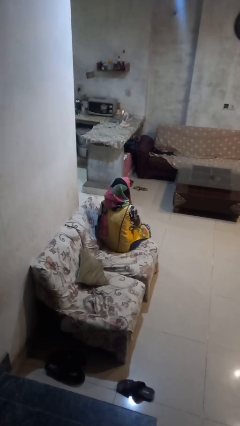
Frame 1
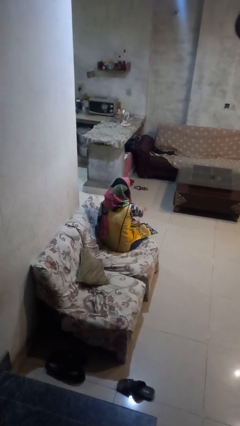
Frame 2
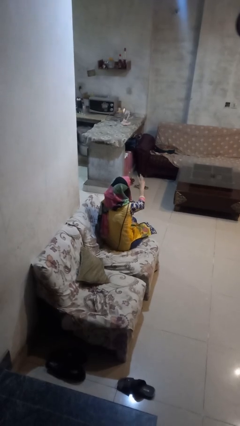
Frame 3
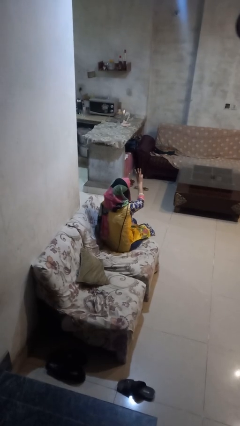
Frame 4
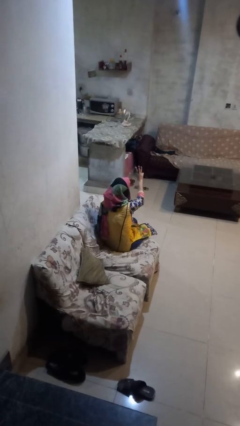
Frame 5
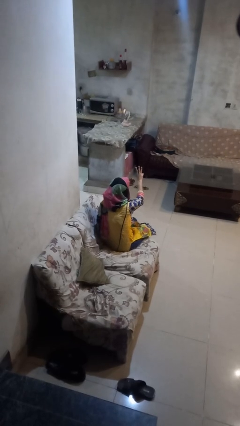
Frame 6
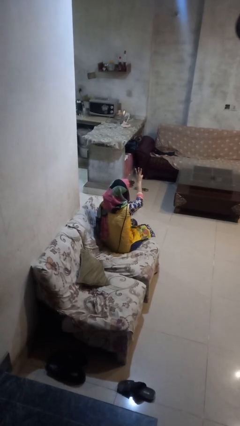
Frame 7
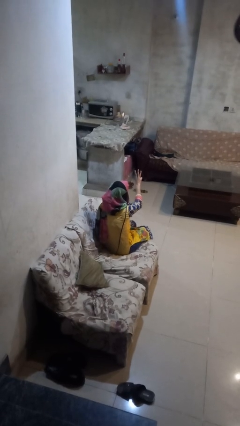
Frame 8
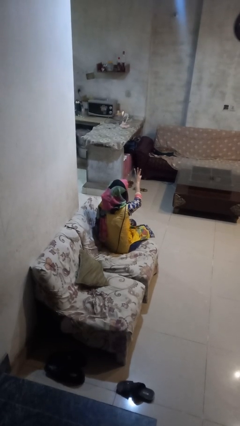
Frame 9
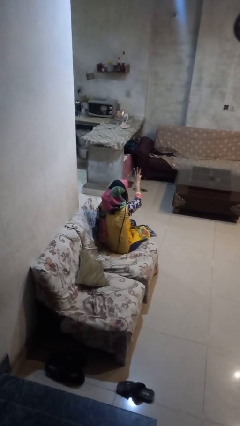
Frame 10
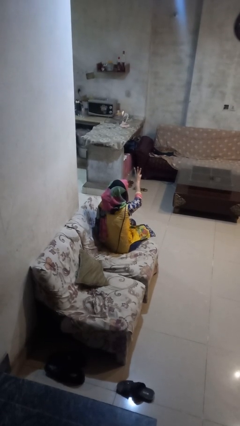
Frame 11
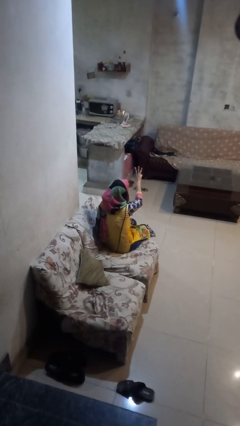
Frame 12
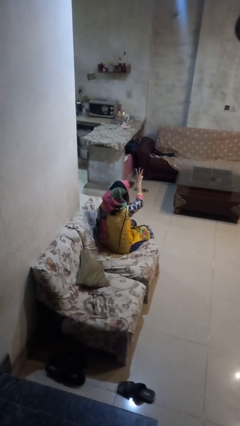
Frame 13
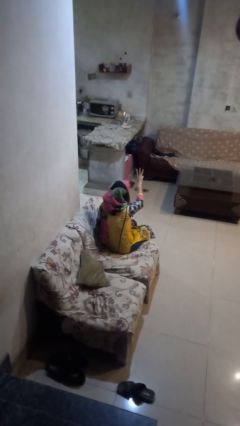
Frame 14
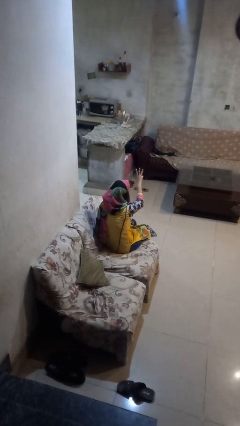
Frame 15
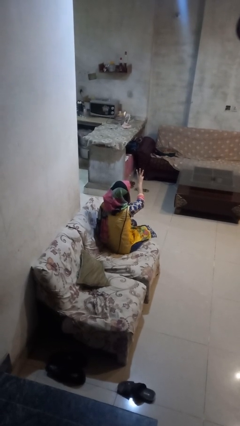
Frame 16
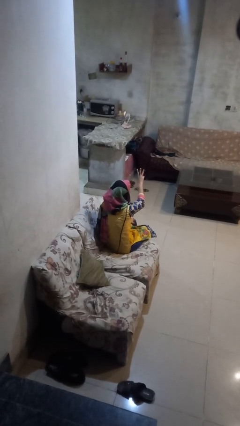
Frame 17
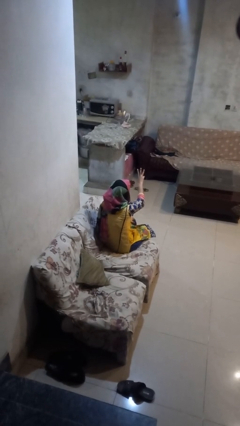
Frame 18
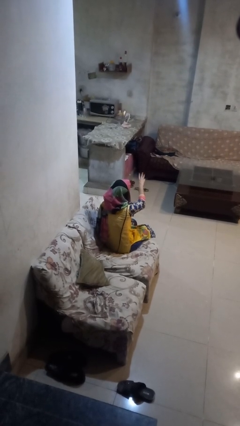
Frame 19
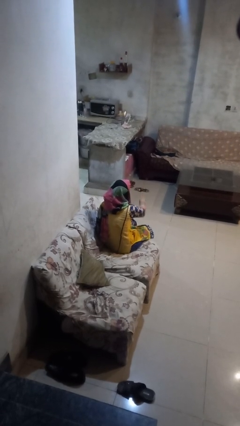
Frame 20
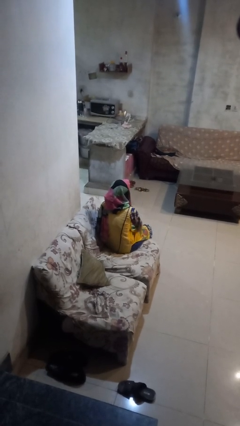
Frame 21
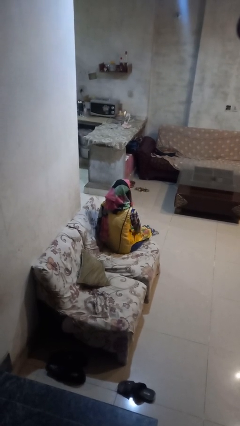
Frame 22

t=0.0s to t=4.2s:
person gestures number three

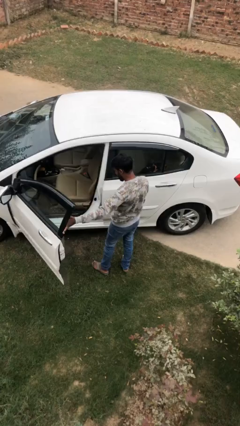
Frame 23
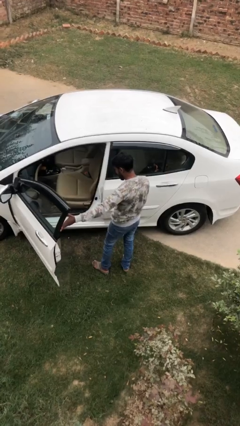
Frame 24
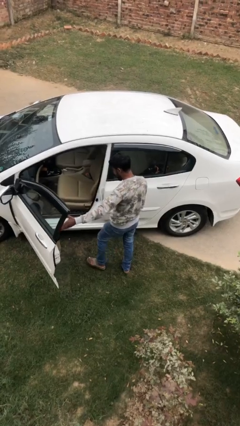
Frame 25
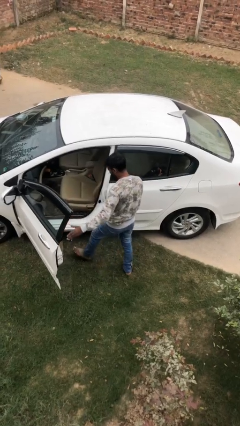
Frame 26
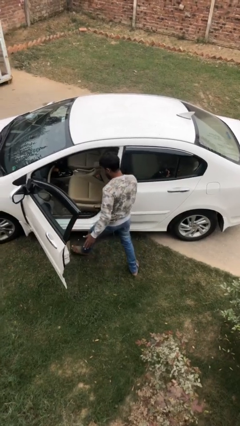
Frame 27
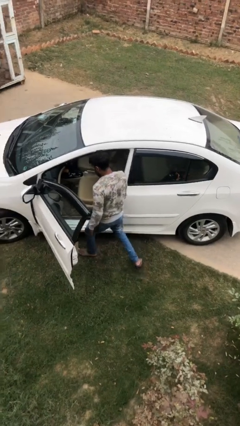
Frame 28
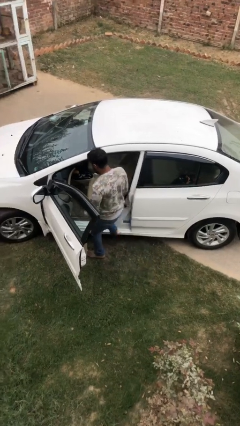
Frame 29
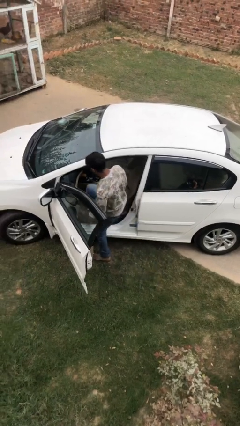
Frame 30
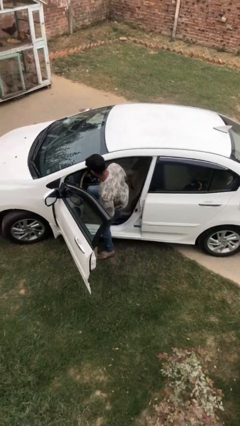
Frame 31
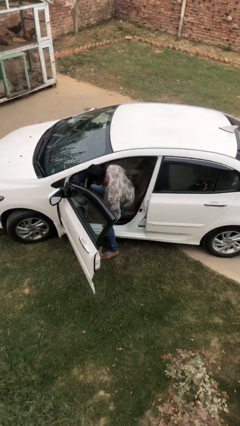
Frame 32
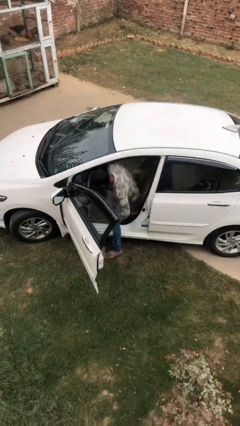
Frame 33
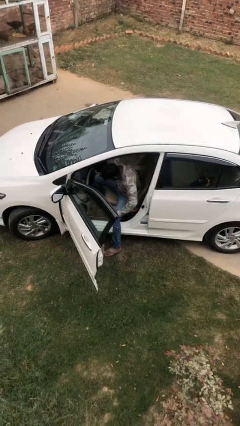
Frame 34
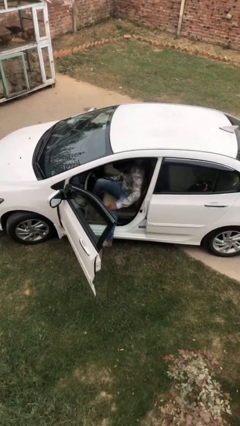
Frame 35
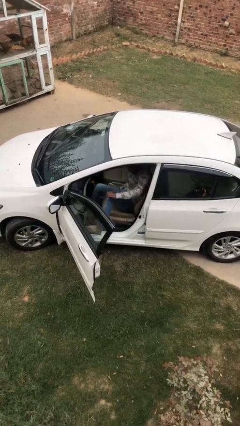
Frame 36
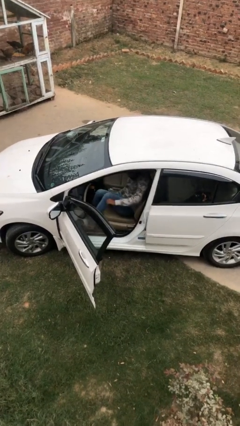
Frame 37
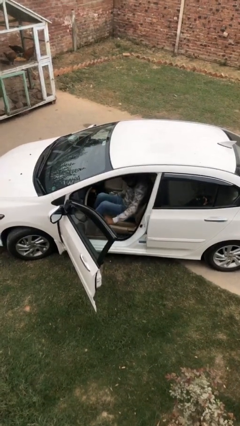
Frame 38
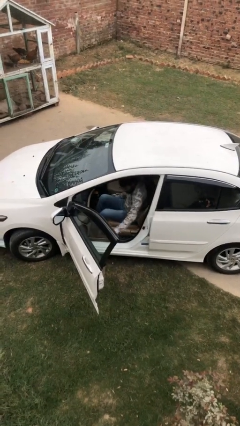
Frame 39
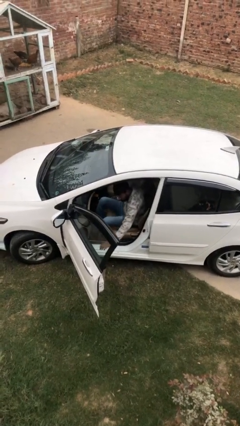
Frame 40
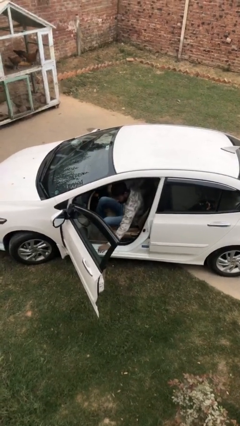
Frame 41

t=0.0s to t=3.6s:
person enters car

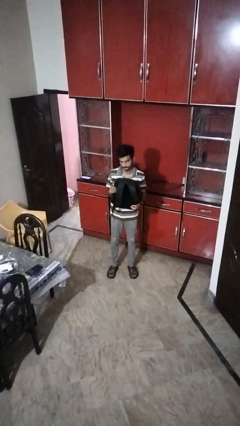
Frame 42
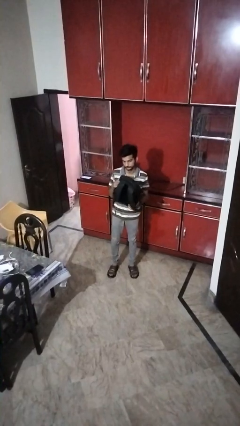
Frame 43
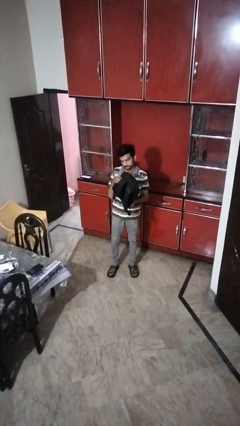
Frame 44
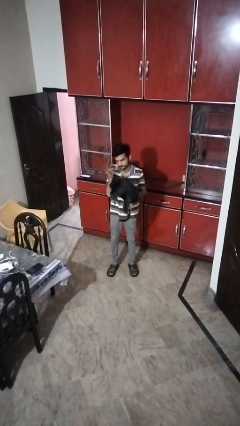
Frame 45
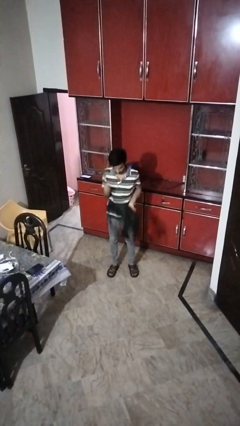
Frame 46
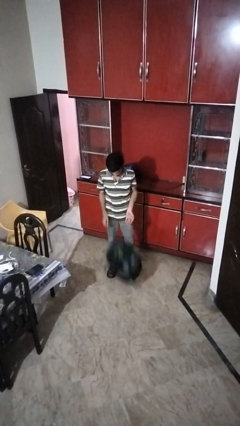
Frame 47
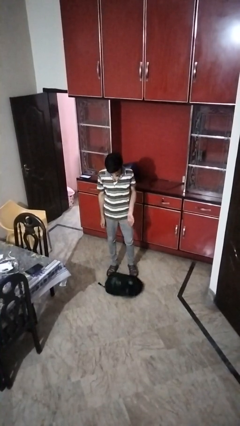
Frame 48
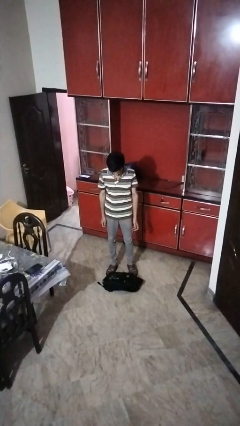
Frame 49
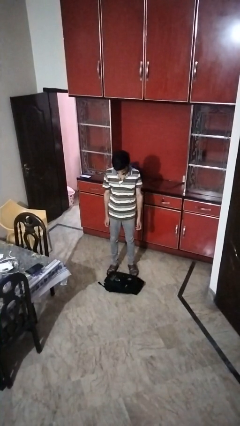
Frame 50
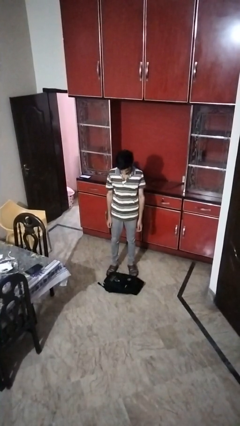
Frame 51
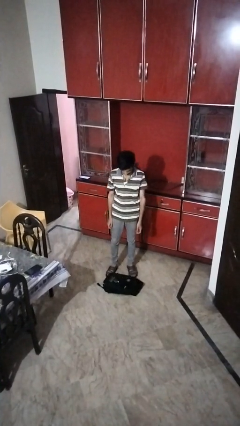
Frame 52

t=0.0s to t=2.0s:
person drops object

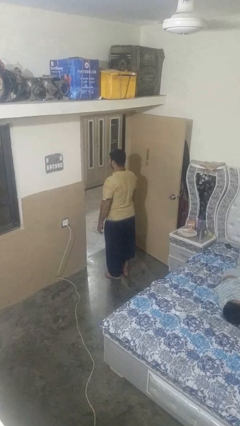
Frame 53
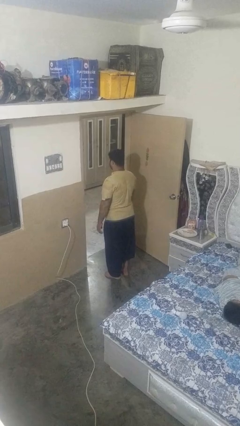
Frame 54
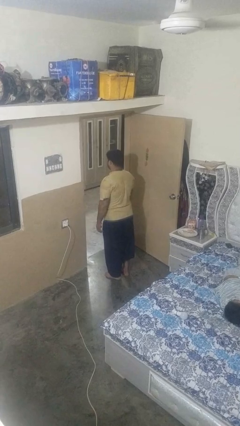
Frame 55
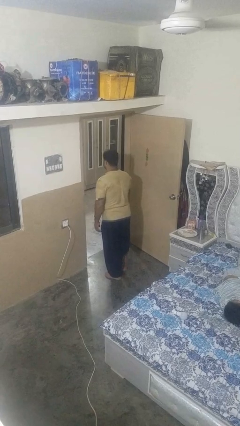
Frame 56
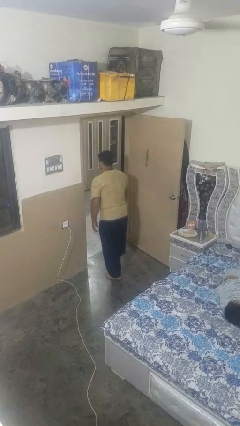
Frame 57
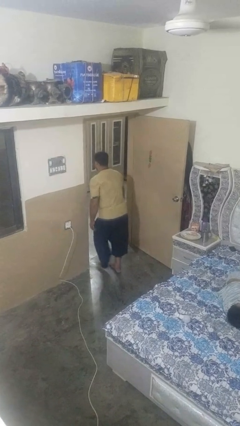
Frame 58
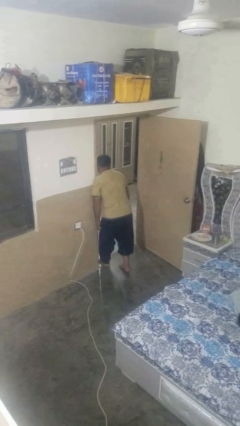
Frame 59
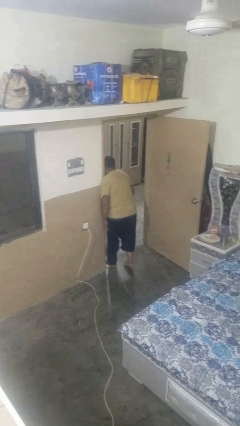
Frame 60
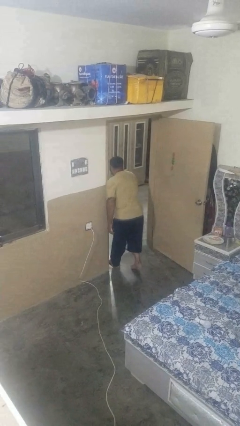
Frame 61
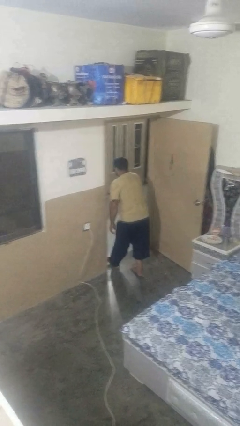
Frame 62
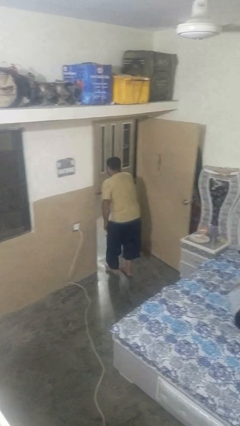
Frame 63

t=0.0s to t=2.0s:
person bumps into wall

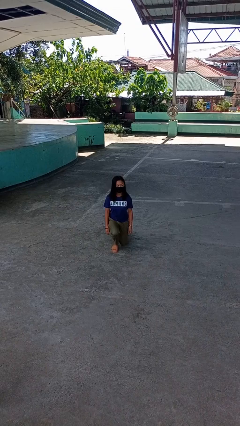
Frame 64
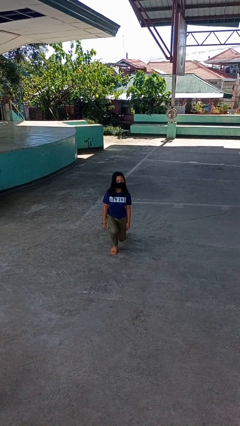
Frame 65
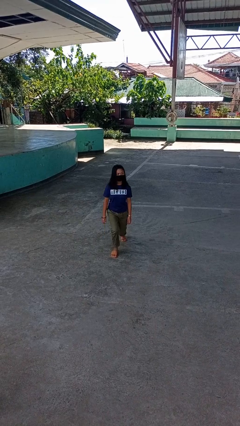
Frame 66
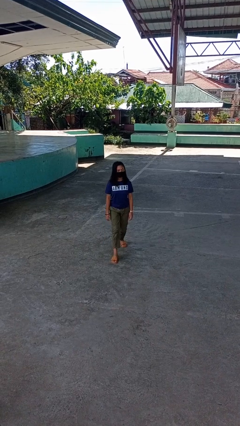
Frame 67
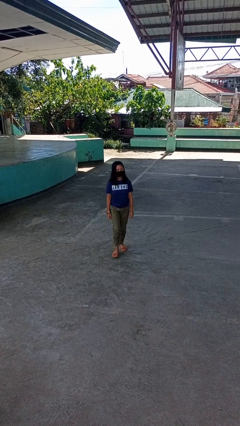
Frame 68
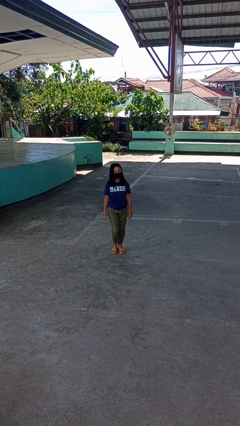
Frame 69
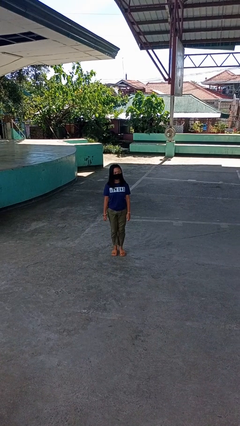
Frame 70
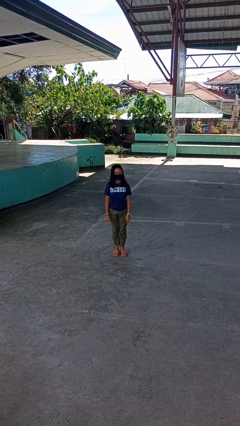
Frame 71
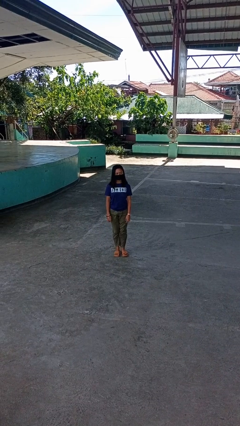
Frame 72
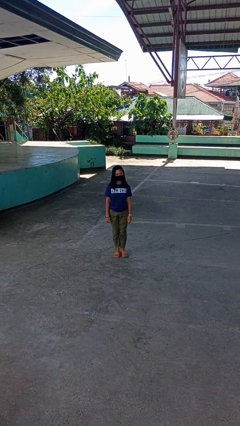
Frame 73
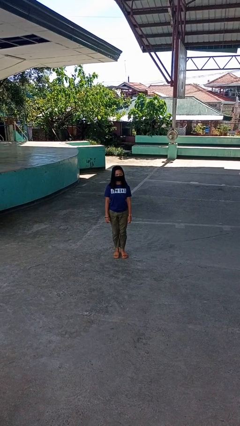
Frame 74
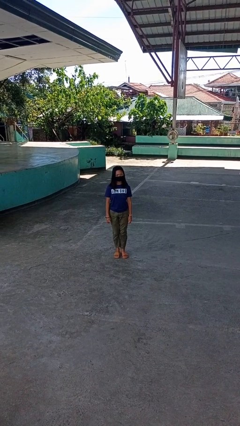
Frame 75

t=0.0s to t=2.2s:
person stands up from floor

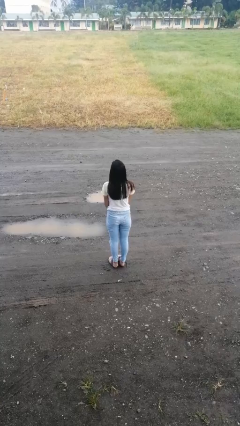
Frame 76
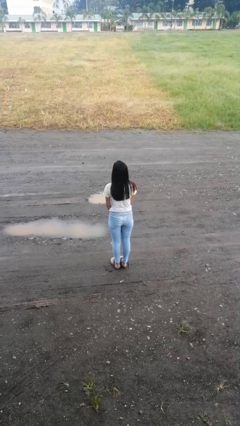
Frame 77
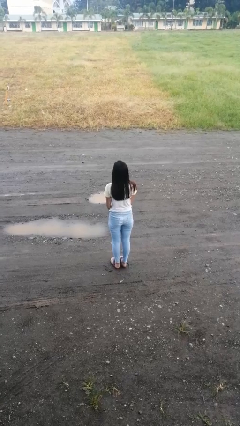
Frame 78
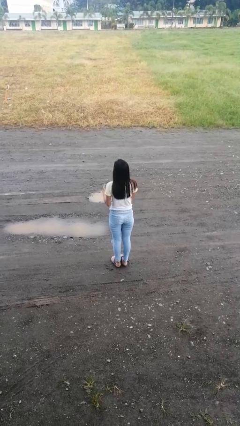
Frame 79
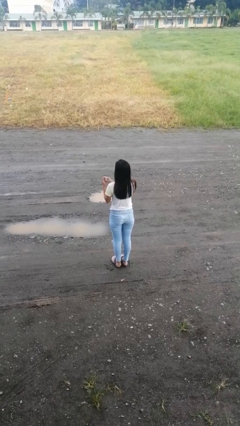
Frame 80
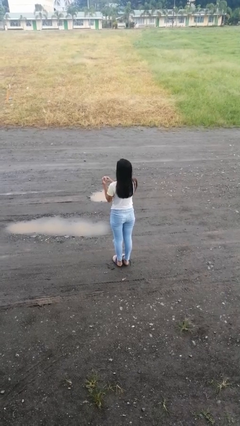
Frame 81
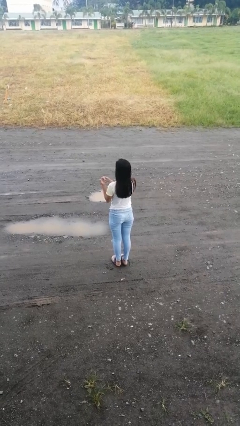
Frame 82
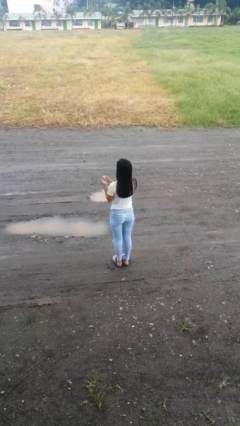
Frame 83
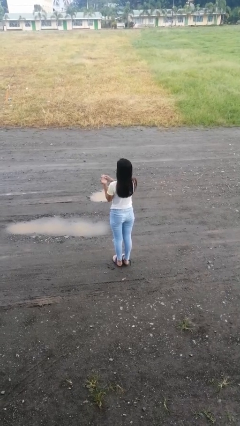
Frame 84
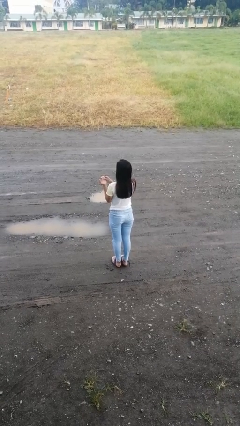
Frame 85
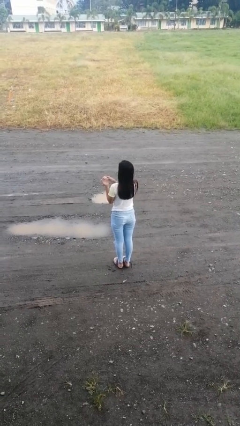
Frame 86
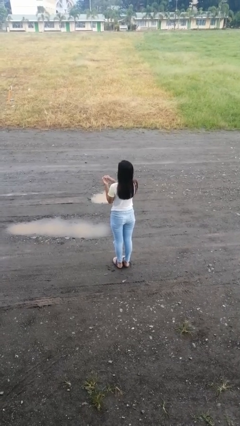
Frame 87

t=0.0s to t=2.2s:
person cracks knuckles

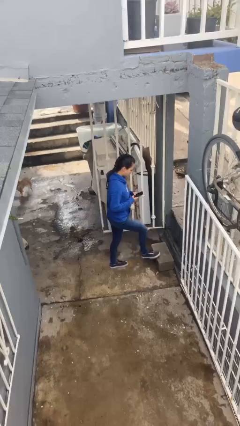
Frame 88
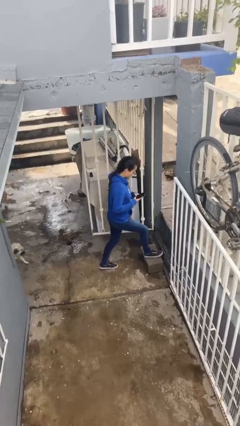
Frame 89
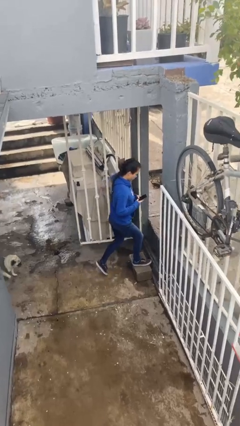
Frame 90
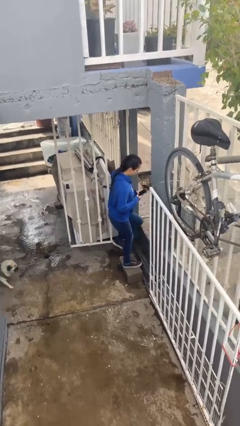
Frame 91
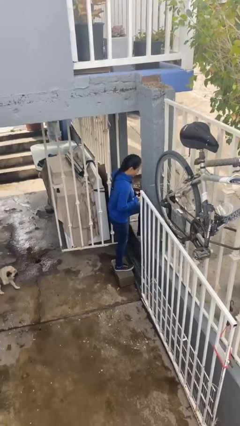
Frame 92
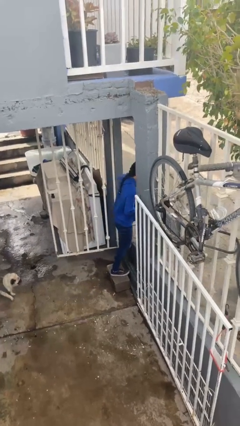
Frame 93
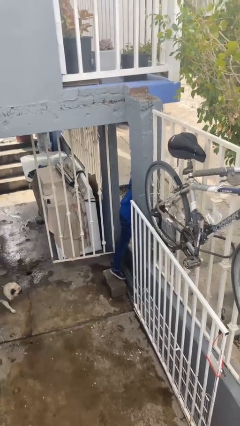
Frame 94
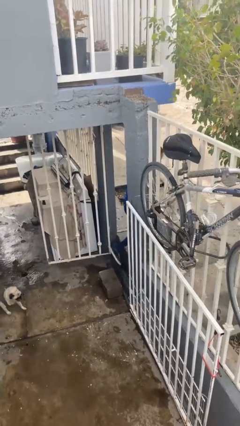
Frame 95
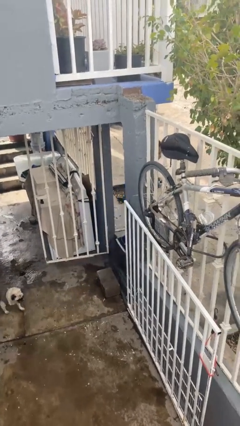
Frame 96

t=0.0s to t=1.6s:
person exits scene through structure
